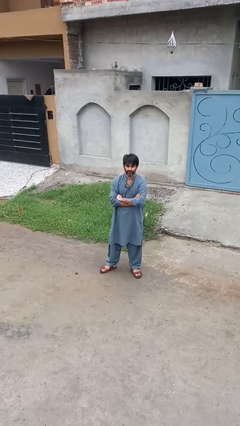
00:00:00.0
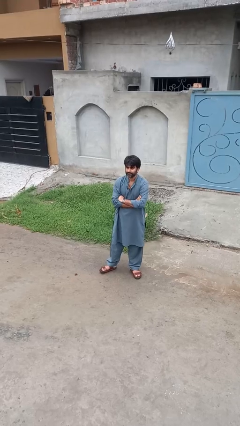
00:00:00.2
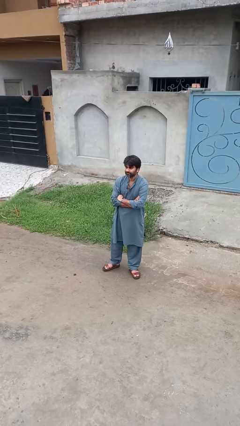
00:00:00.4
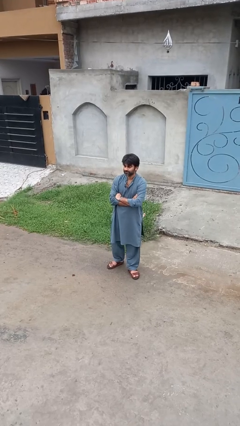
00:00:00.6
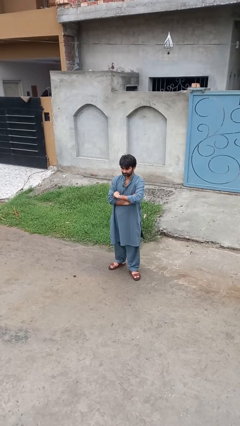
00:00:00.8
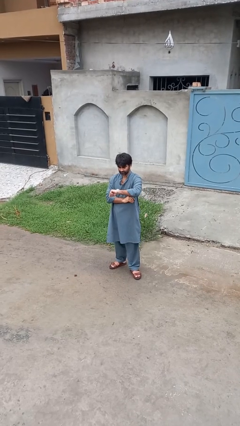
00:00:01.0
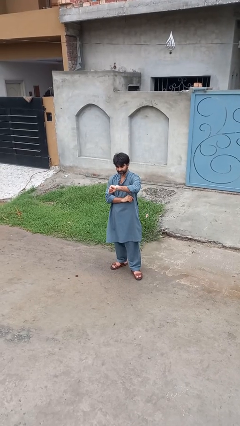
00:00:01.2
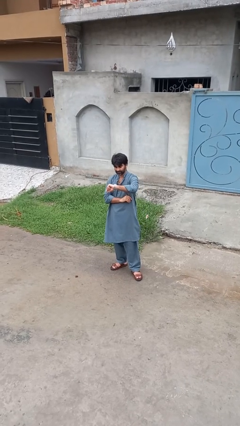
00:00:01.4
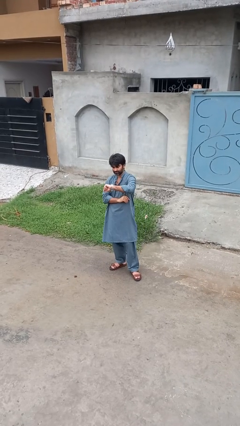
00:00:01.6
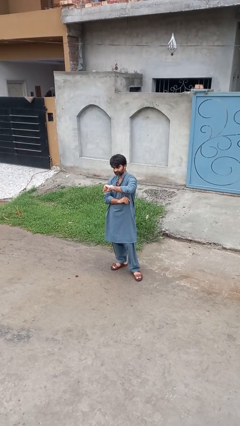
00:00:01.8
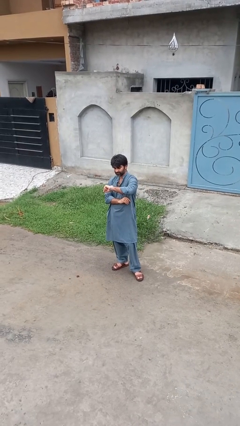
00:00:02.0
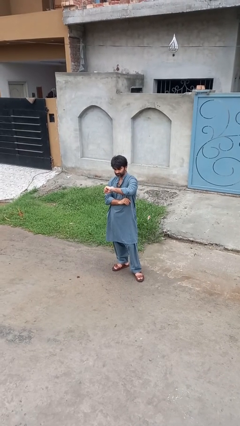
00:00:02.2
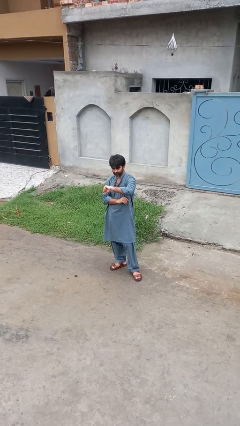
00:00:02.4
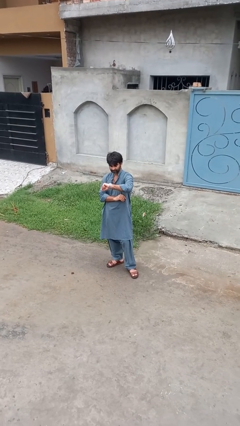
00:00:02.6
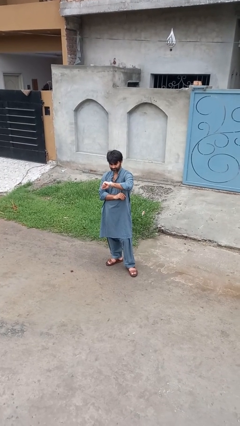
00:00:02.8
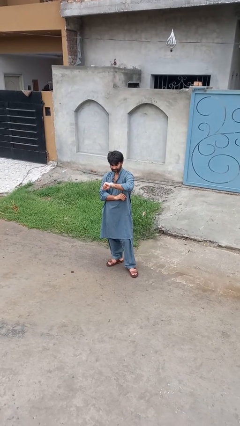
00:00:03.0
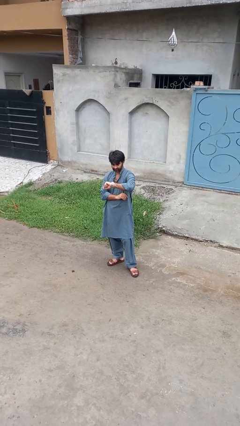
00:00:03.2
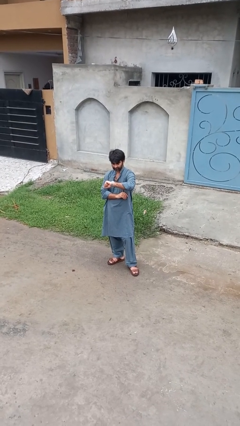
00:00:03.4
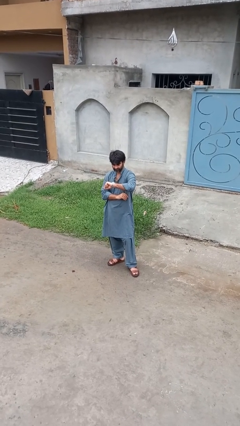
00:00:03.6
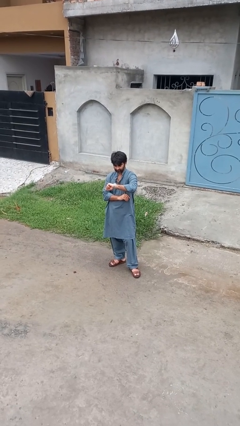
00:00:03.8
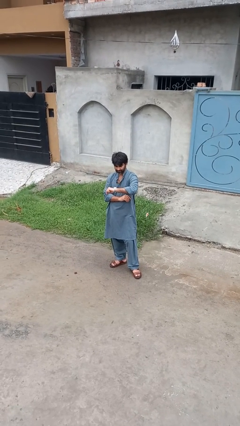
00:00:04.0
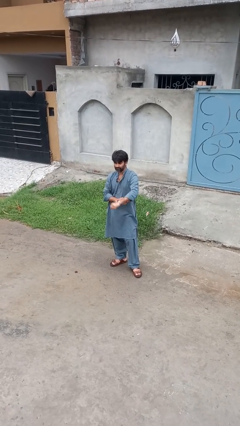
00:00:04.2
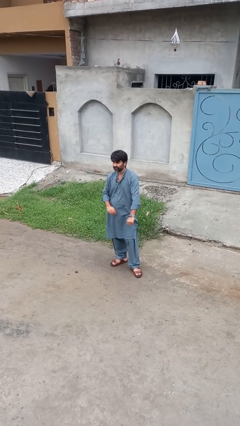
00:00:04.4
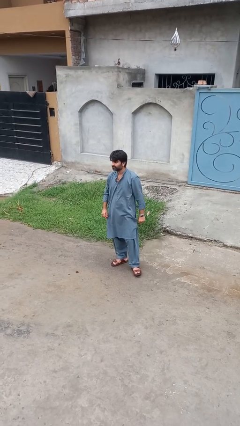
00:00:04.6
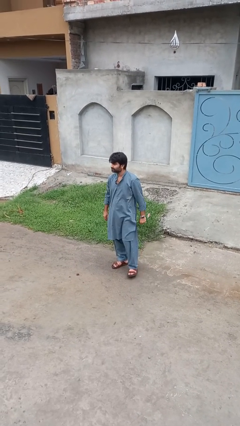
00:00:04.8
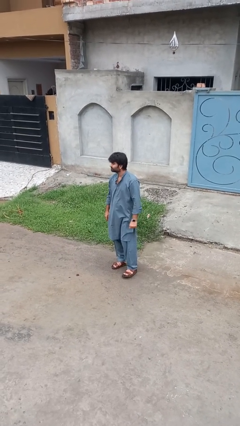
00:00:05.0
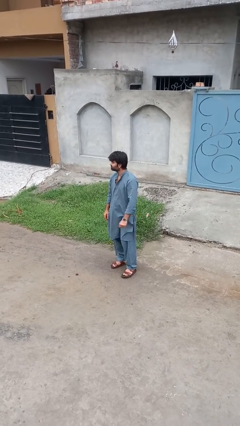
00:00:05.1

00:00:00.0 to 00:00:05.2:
person looks at wristwatch

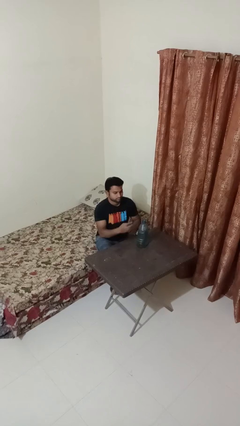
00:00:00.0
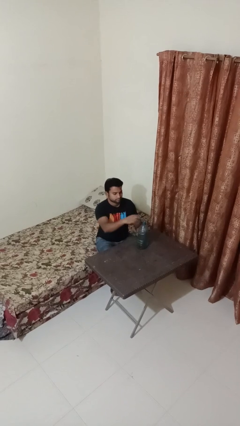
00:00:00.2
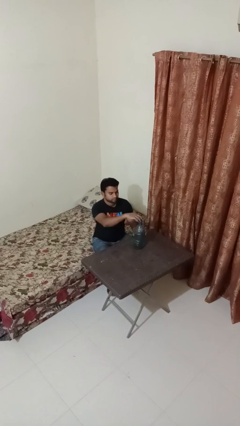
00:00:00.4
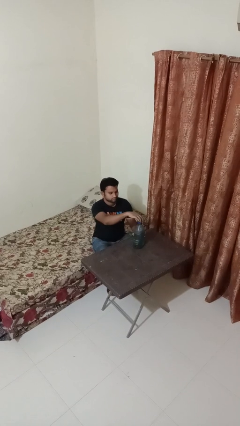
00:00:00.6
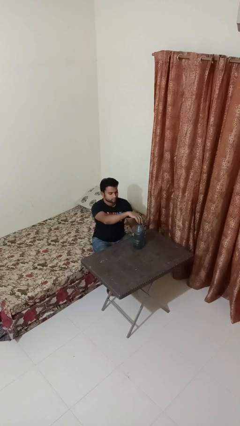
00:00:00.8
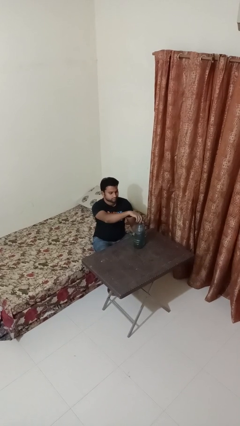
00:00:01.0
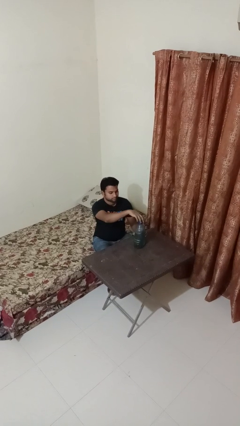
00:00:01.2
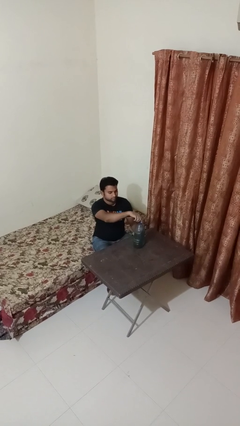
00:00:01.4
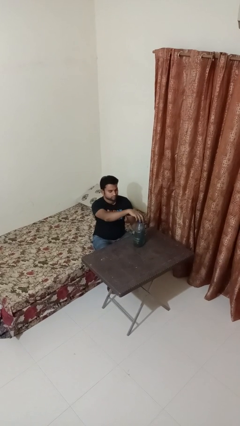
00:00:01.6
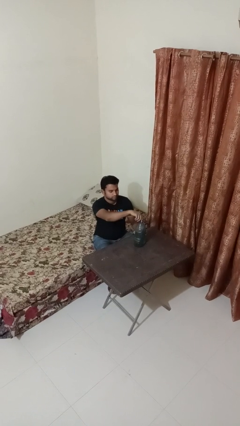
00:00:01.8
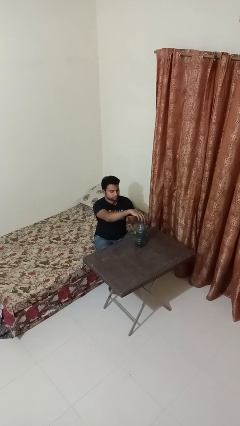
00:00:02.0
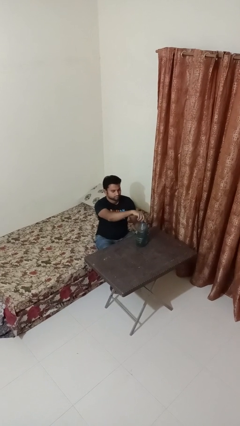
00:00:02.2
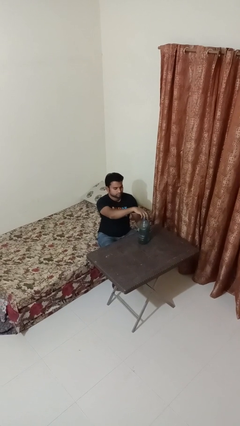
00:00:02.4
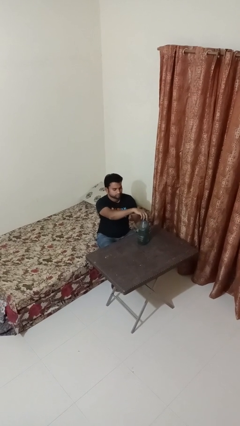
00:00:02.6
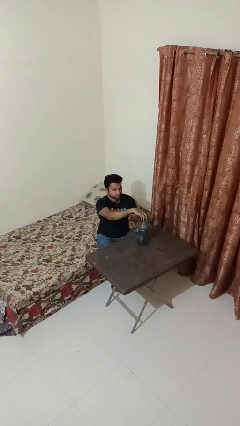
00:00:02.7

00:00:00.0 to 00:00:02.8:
person screws lid to bottle

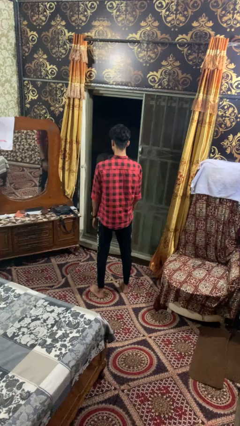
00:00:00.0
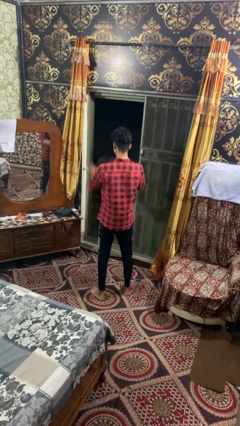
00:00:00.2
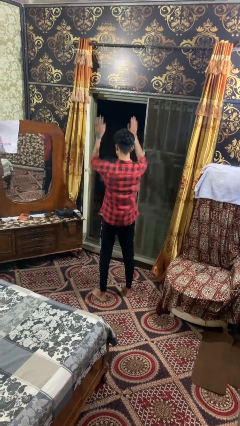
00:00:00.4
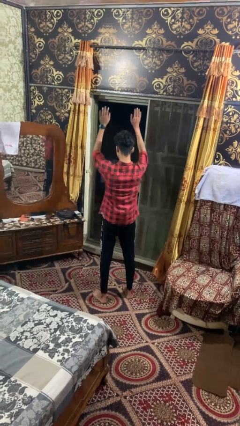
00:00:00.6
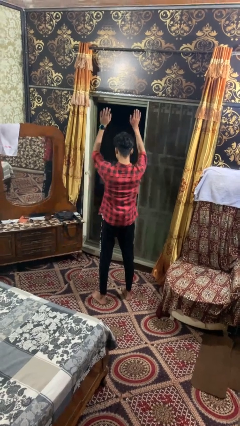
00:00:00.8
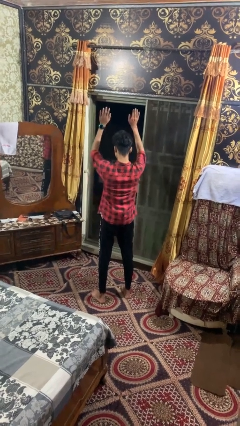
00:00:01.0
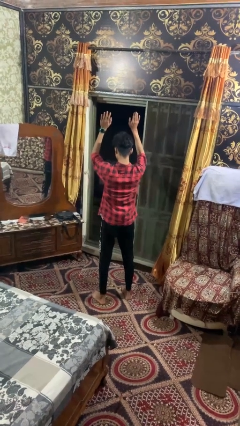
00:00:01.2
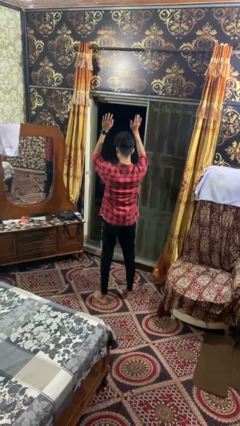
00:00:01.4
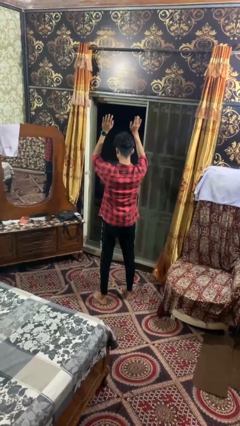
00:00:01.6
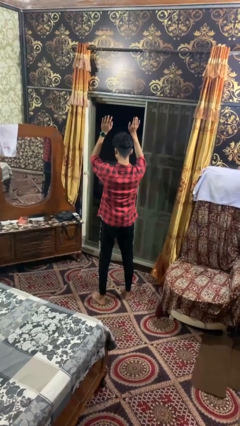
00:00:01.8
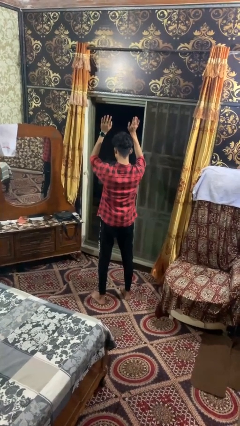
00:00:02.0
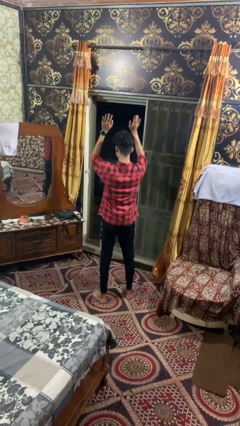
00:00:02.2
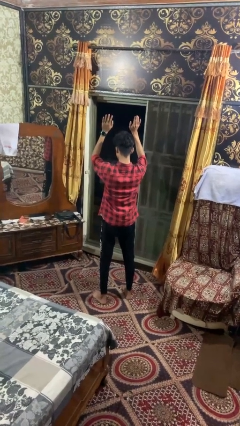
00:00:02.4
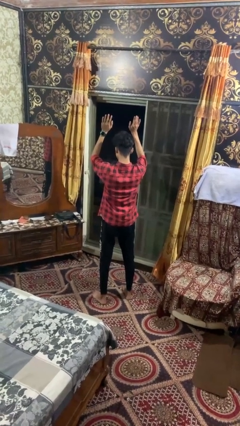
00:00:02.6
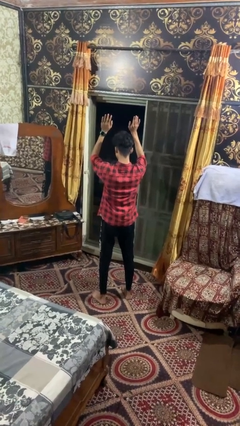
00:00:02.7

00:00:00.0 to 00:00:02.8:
person gestures swipe up

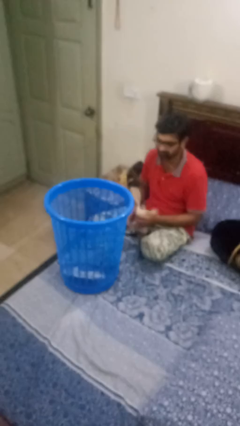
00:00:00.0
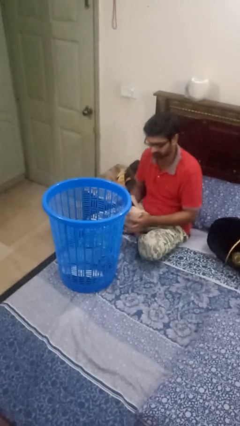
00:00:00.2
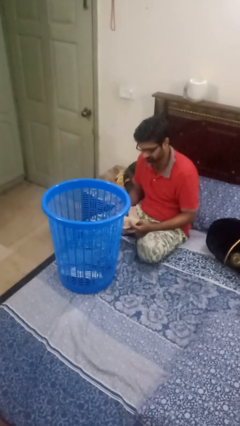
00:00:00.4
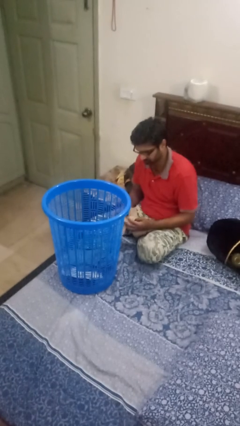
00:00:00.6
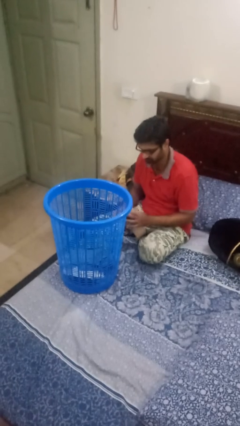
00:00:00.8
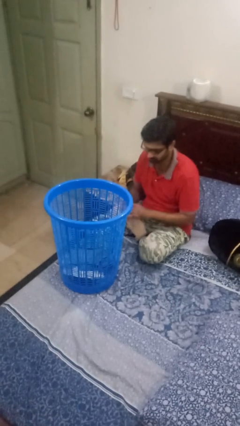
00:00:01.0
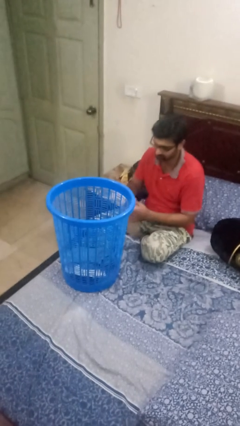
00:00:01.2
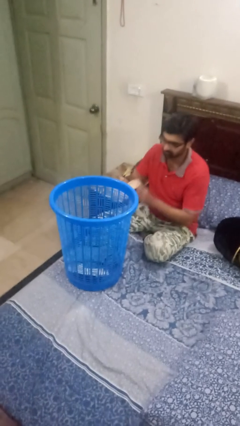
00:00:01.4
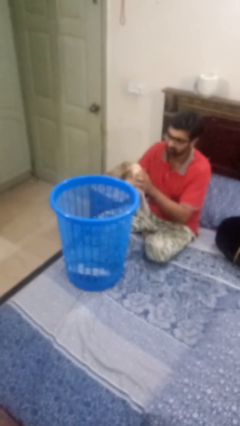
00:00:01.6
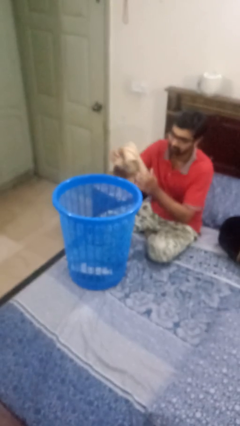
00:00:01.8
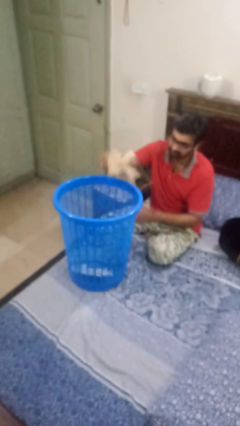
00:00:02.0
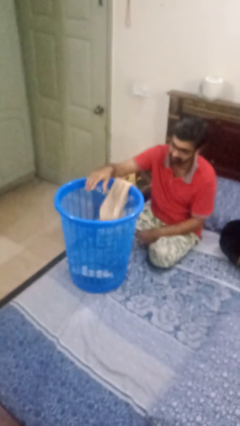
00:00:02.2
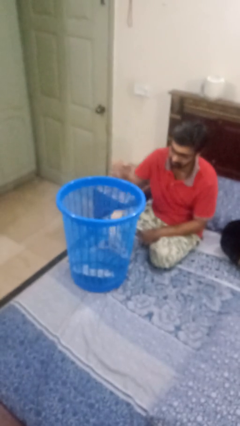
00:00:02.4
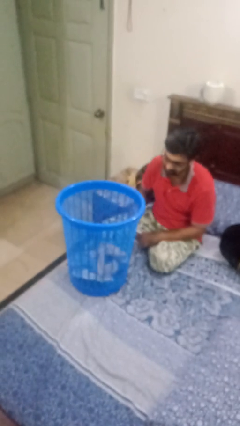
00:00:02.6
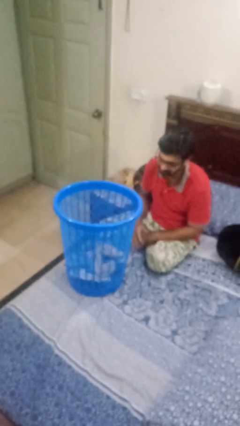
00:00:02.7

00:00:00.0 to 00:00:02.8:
person puts object into basket

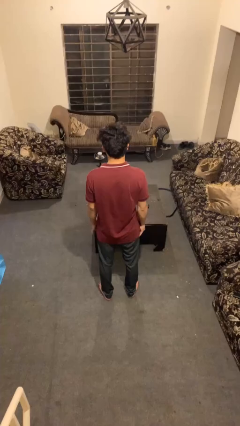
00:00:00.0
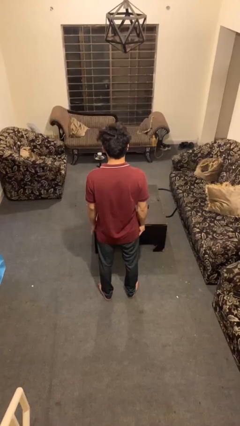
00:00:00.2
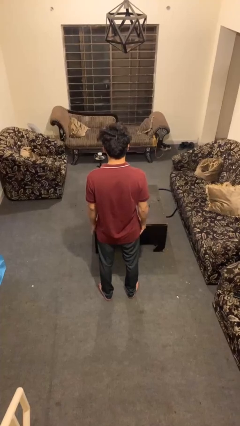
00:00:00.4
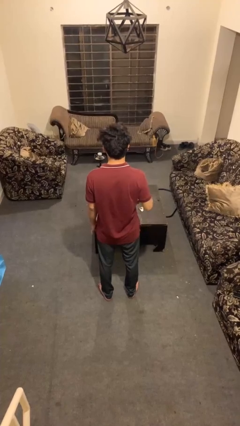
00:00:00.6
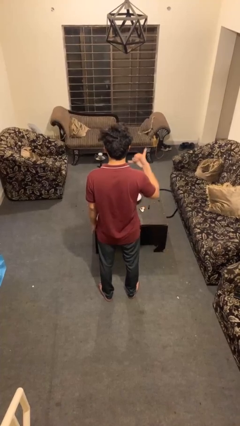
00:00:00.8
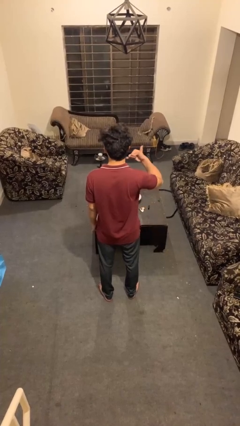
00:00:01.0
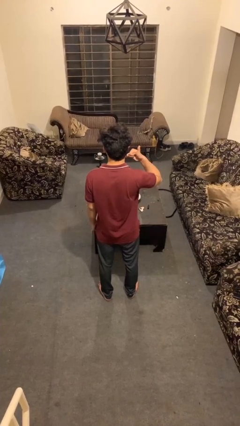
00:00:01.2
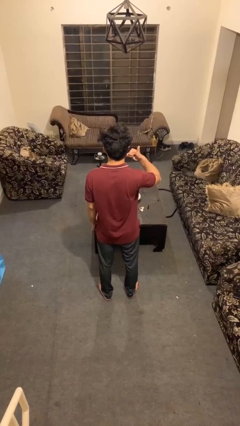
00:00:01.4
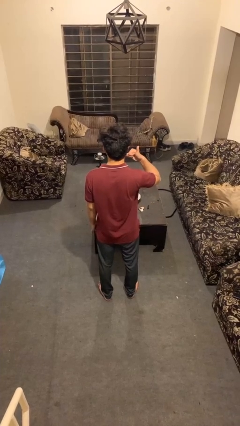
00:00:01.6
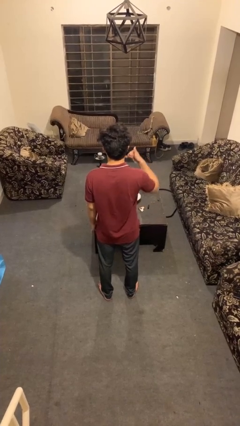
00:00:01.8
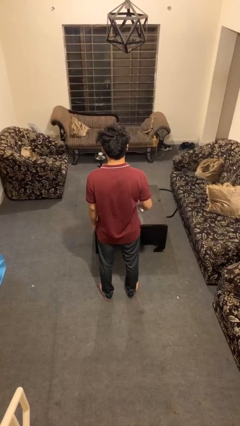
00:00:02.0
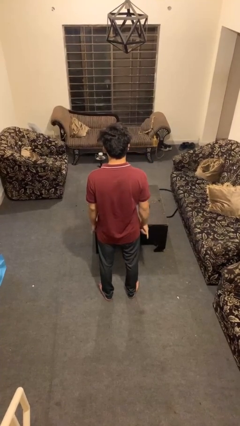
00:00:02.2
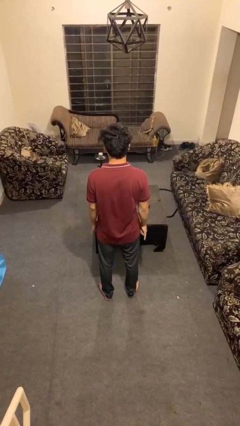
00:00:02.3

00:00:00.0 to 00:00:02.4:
person gestures call me

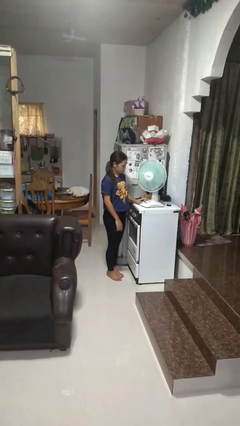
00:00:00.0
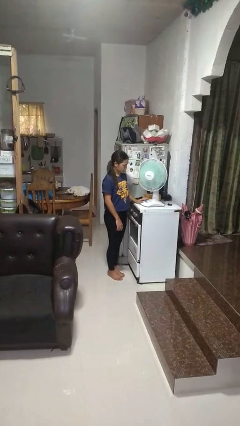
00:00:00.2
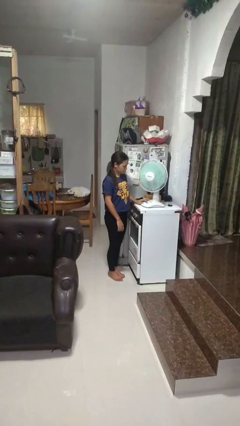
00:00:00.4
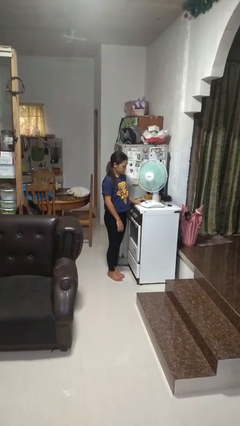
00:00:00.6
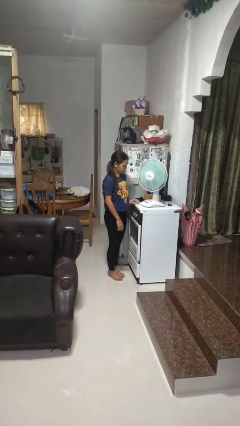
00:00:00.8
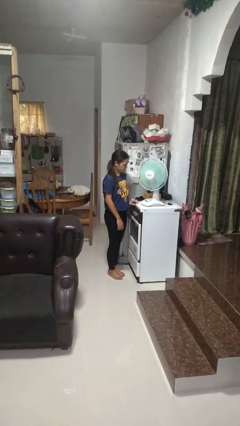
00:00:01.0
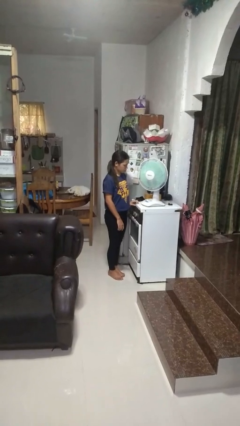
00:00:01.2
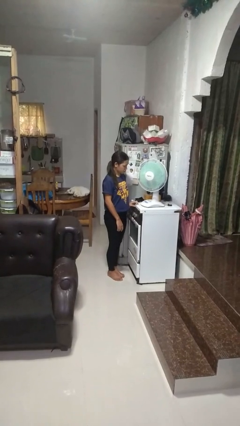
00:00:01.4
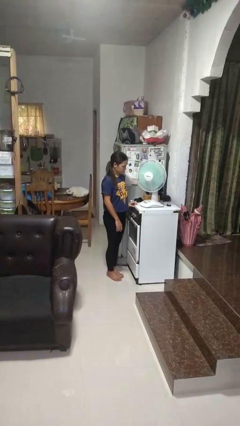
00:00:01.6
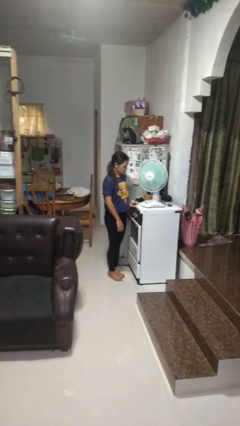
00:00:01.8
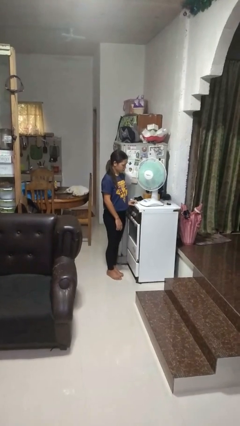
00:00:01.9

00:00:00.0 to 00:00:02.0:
person turns on fan
